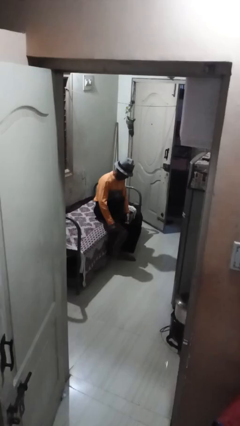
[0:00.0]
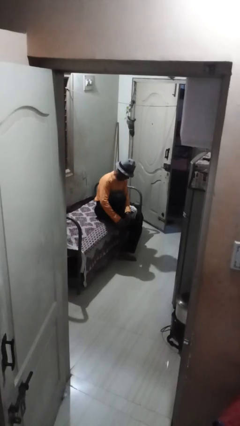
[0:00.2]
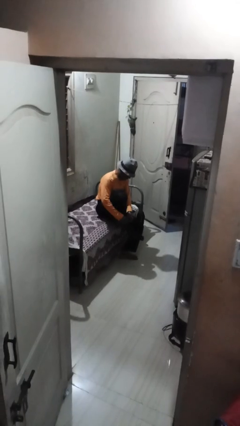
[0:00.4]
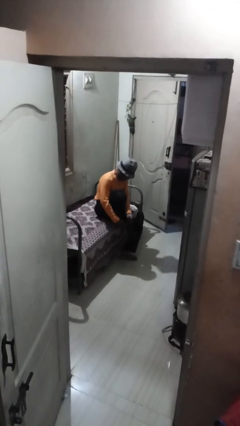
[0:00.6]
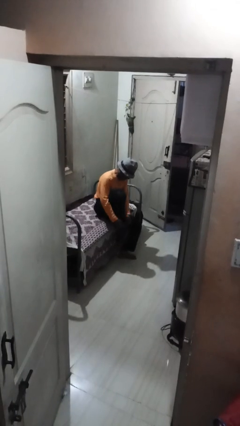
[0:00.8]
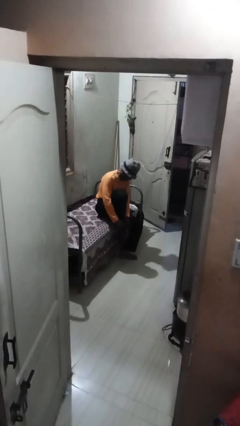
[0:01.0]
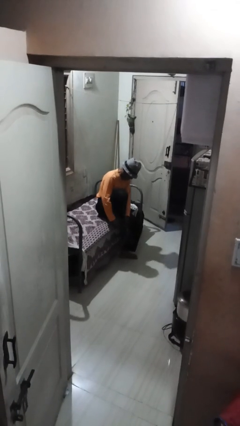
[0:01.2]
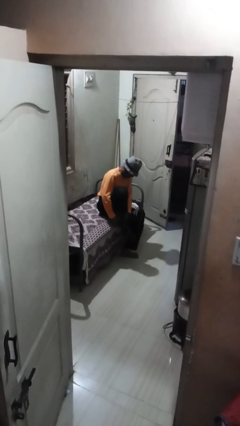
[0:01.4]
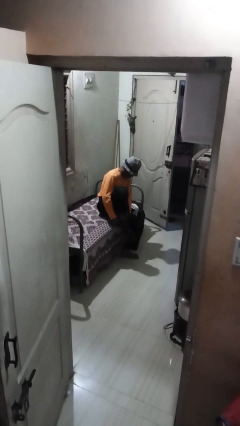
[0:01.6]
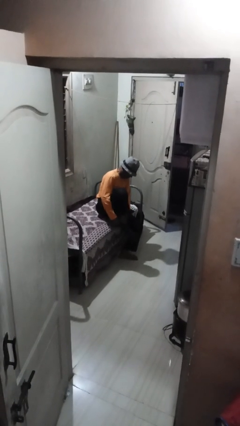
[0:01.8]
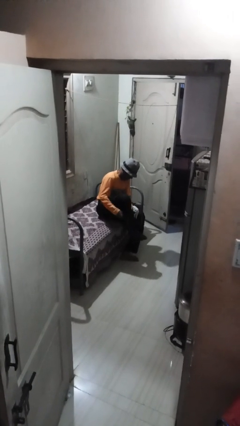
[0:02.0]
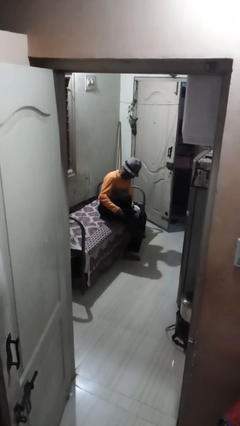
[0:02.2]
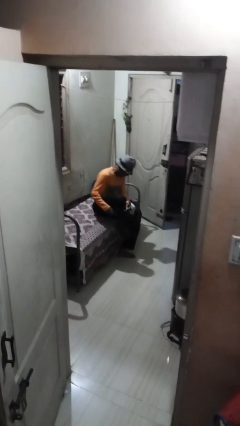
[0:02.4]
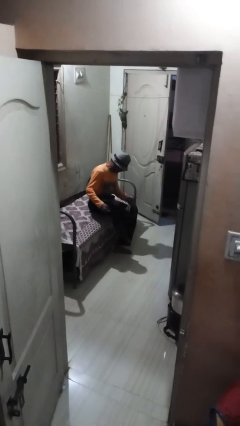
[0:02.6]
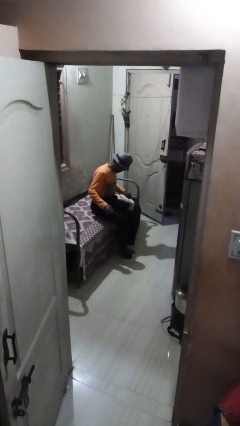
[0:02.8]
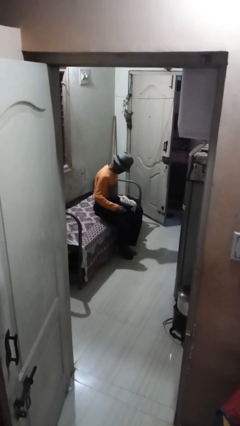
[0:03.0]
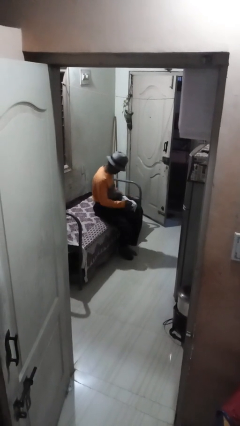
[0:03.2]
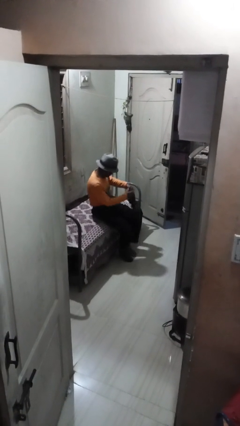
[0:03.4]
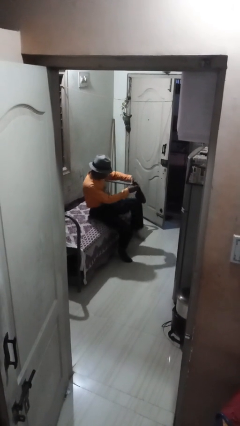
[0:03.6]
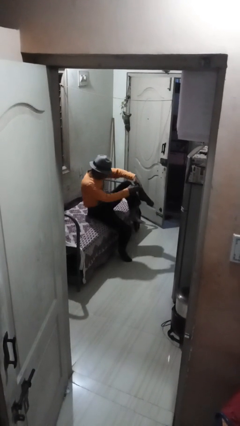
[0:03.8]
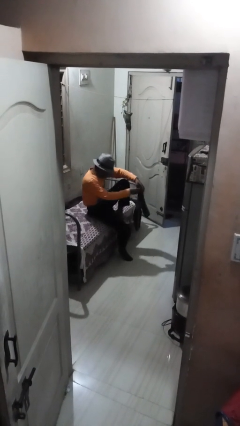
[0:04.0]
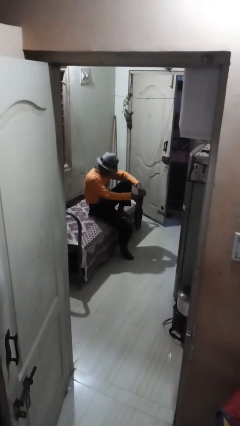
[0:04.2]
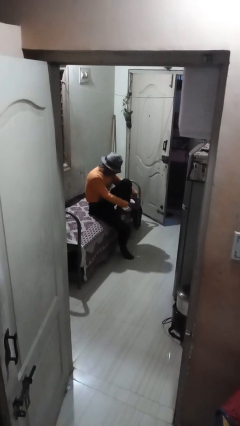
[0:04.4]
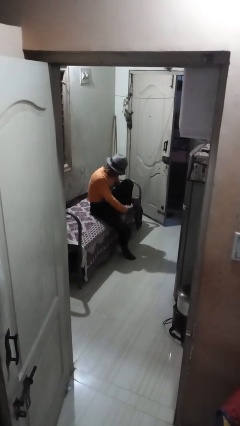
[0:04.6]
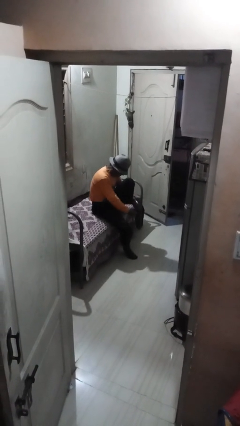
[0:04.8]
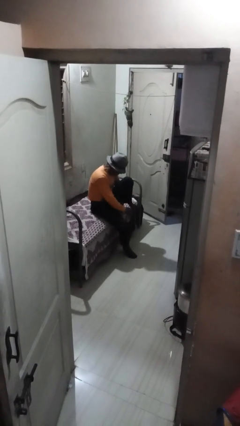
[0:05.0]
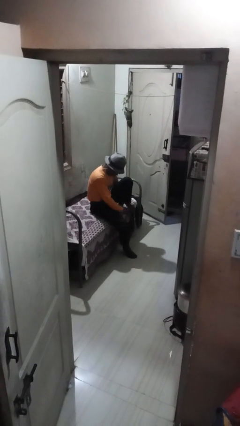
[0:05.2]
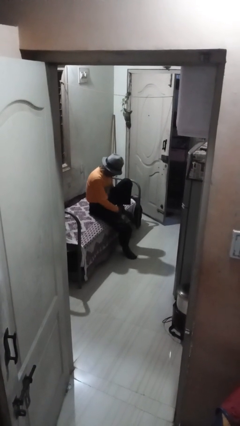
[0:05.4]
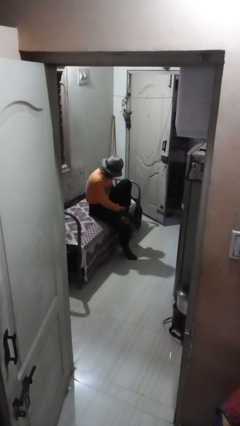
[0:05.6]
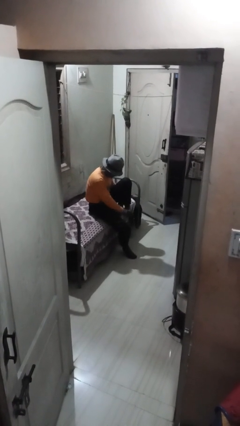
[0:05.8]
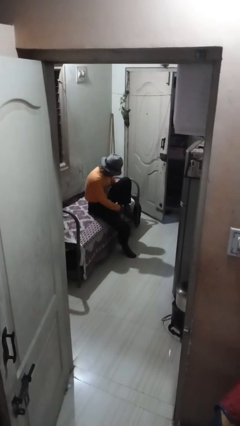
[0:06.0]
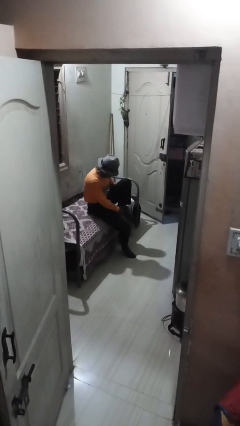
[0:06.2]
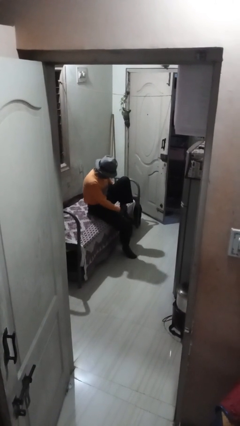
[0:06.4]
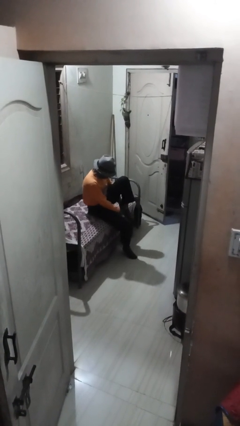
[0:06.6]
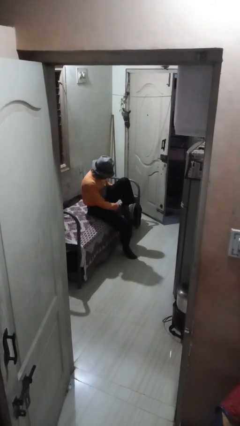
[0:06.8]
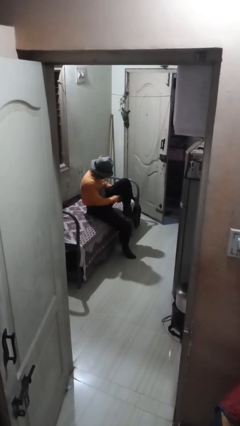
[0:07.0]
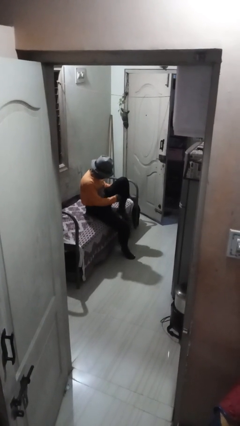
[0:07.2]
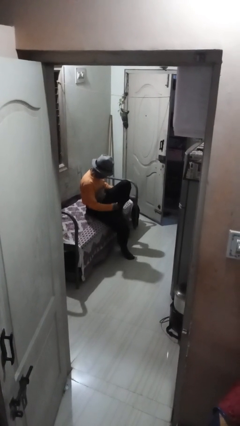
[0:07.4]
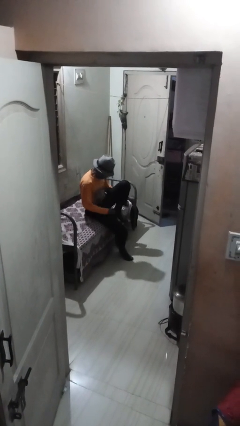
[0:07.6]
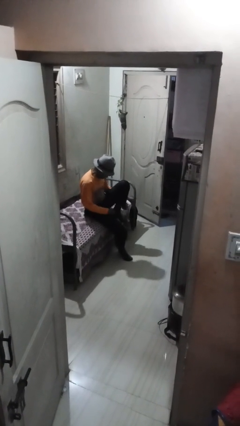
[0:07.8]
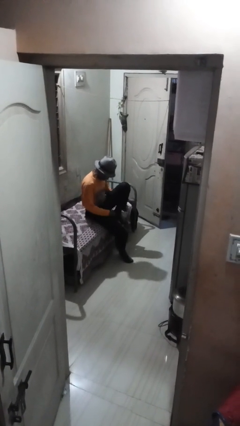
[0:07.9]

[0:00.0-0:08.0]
person puts on socks

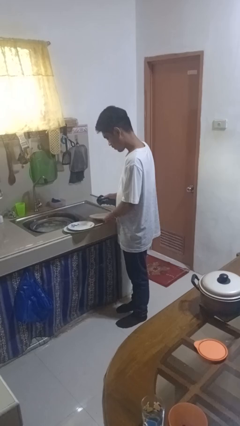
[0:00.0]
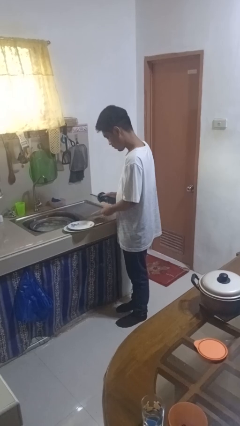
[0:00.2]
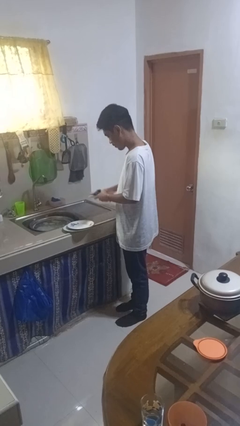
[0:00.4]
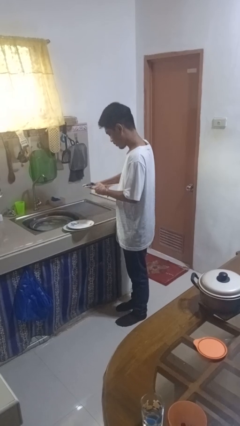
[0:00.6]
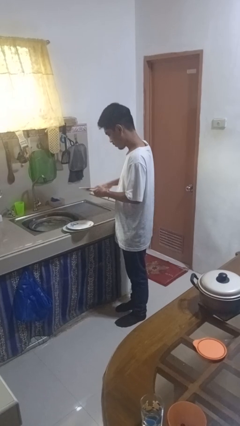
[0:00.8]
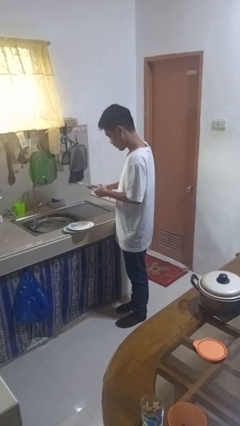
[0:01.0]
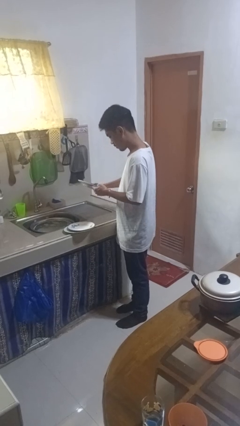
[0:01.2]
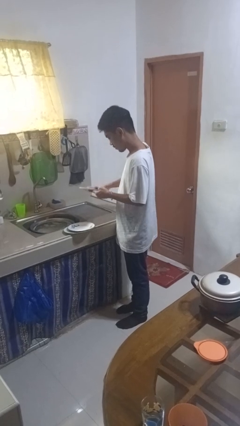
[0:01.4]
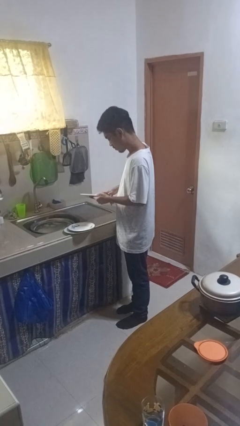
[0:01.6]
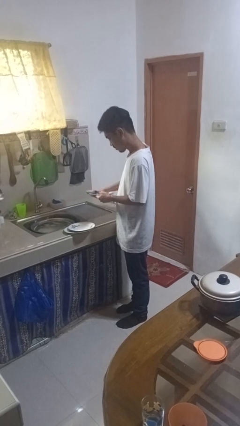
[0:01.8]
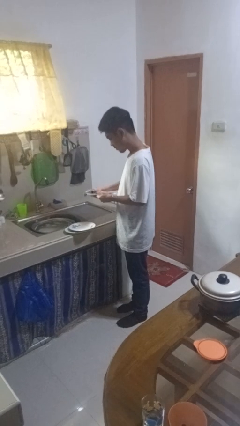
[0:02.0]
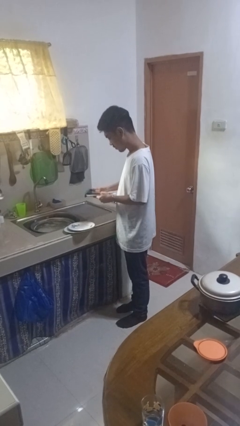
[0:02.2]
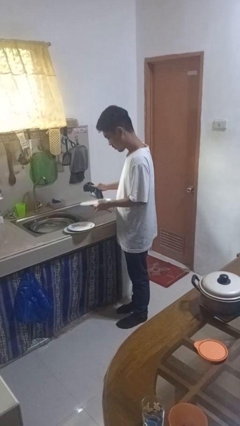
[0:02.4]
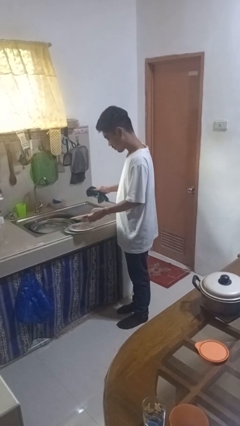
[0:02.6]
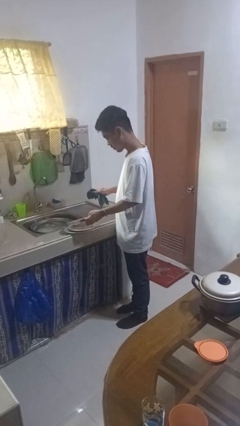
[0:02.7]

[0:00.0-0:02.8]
person dries dish

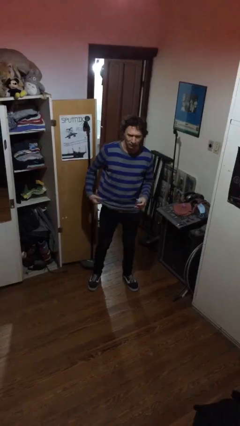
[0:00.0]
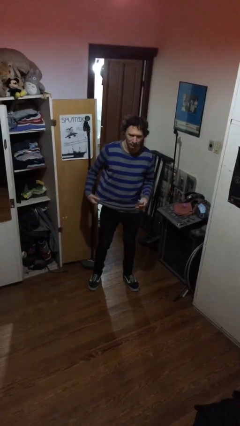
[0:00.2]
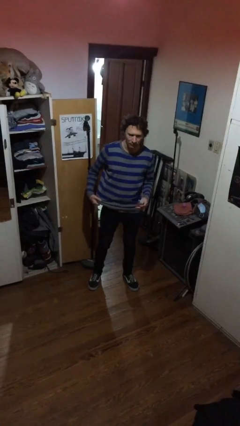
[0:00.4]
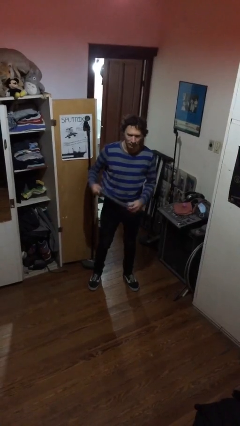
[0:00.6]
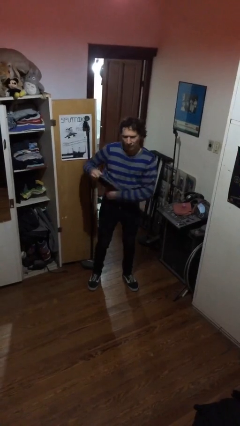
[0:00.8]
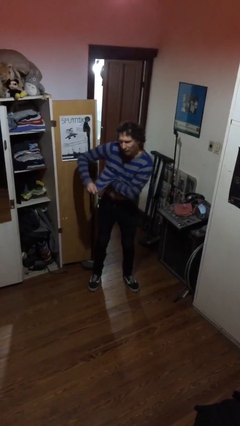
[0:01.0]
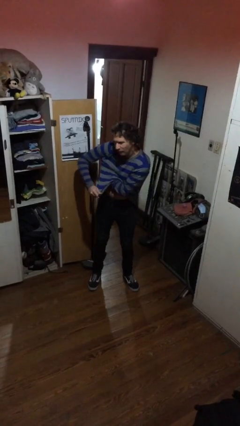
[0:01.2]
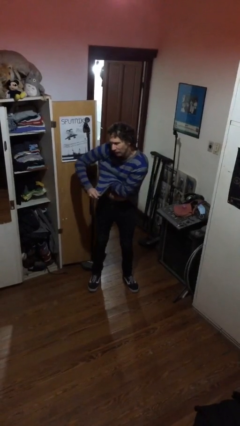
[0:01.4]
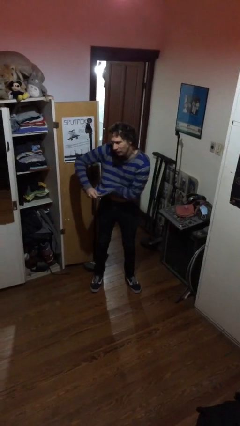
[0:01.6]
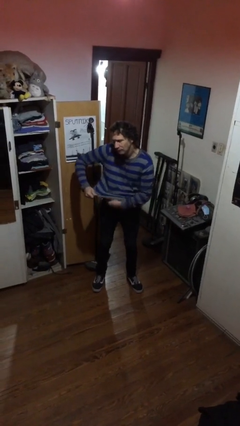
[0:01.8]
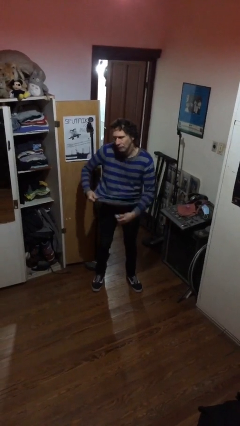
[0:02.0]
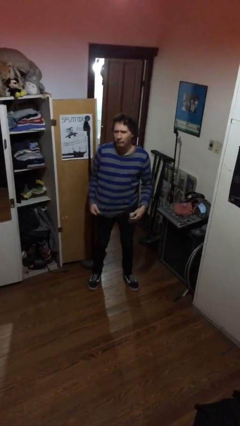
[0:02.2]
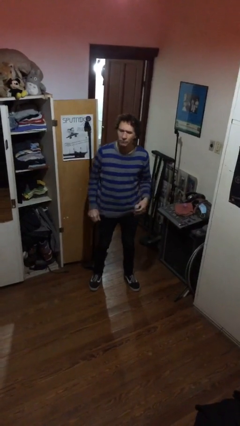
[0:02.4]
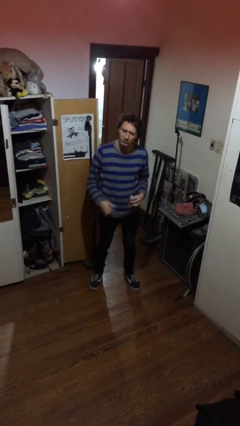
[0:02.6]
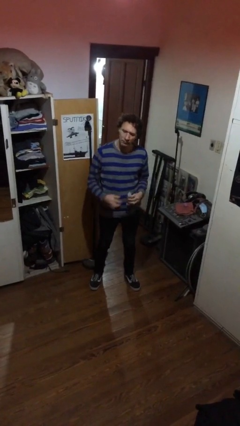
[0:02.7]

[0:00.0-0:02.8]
person applies deodorant

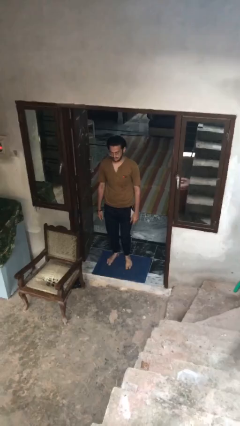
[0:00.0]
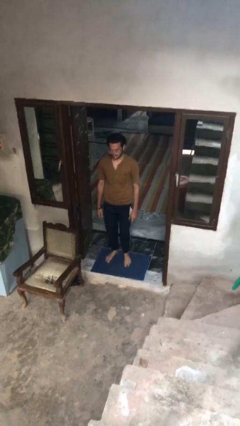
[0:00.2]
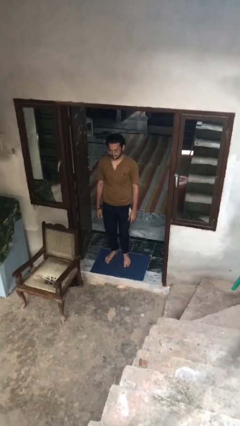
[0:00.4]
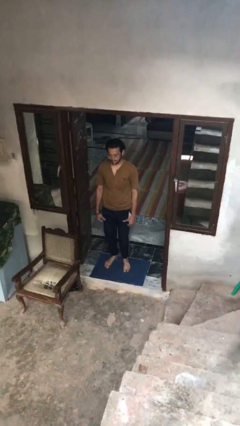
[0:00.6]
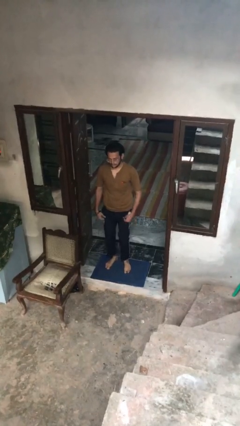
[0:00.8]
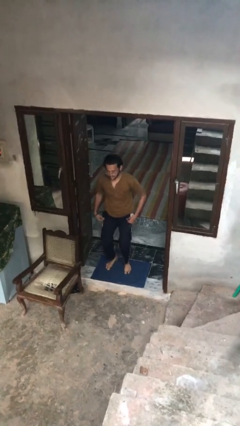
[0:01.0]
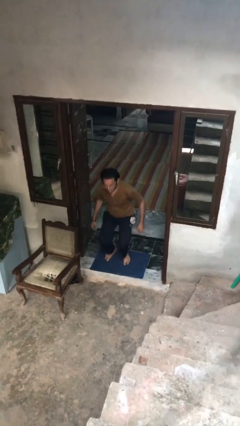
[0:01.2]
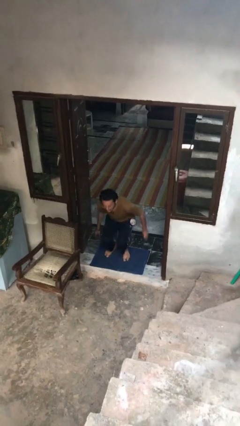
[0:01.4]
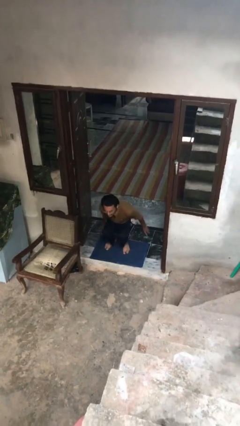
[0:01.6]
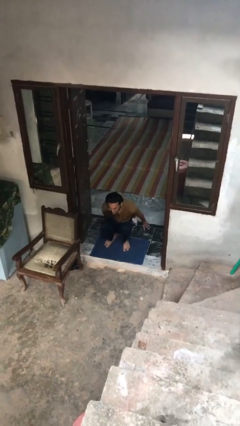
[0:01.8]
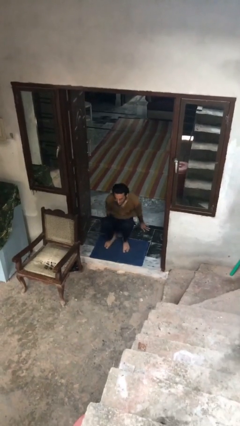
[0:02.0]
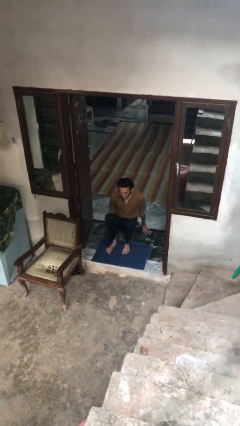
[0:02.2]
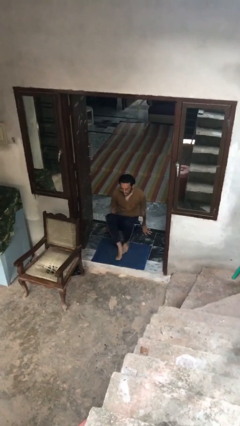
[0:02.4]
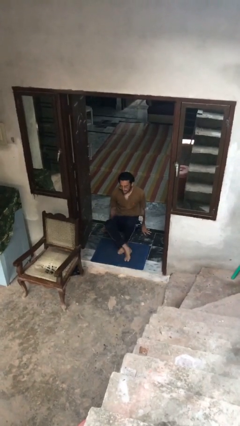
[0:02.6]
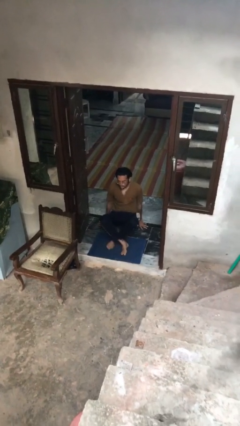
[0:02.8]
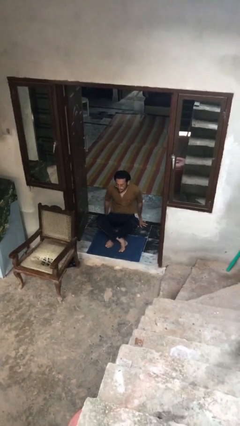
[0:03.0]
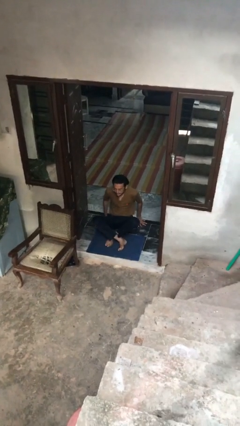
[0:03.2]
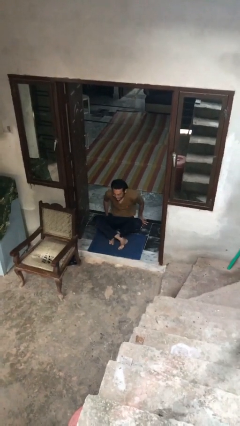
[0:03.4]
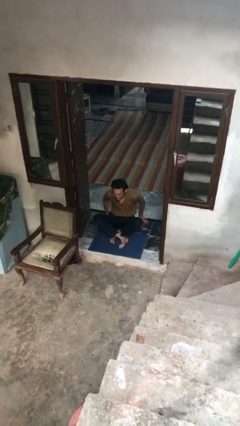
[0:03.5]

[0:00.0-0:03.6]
person sits crisscross

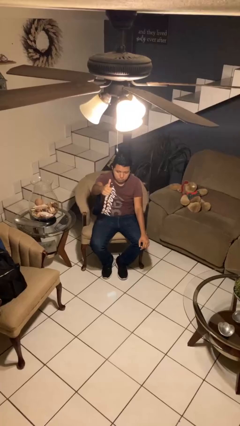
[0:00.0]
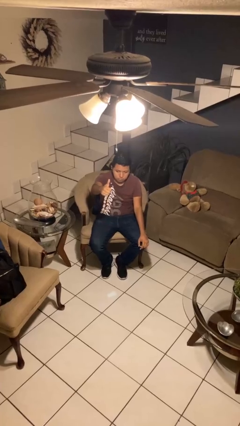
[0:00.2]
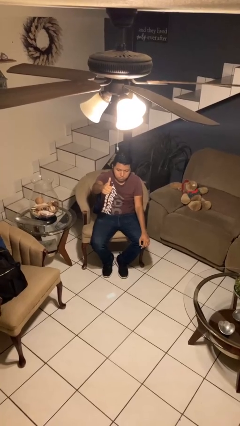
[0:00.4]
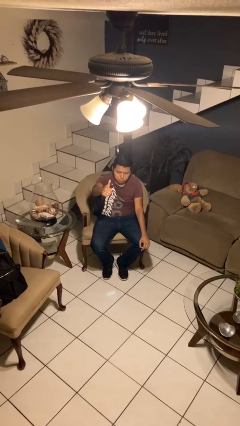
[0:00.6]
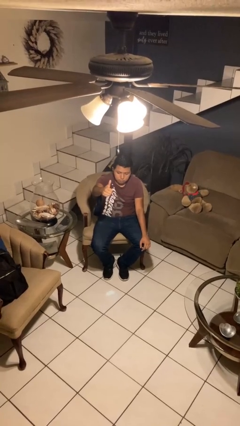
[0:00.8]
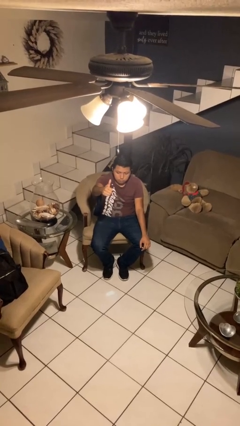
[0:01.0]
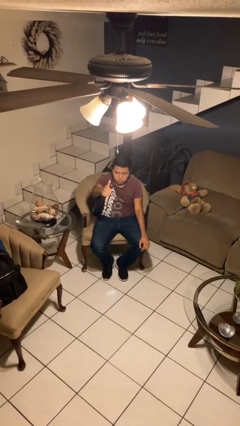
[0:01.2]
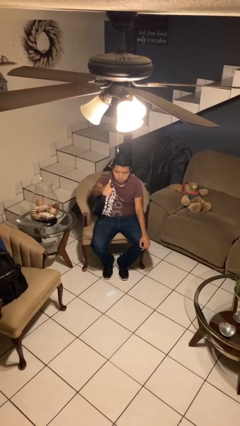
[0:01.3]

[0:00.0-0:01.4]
person gestures thumbs up
